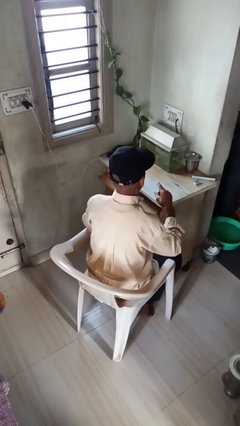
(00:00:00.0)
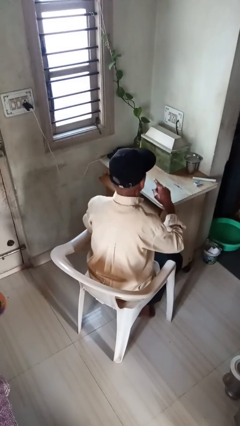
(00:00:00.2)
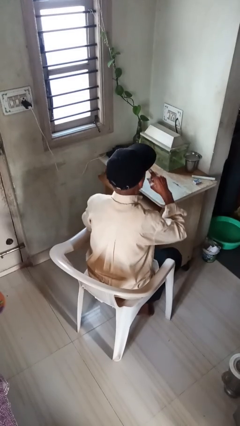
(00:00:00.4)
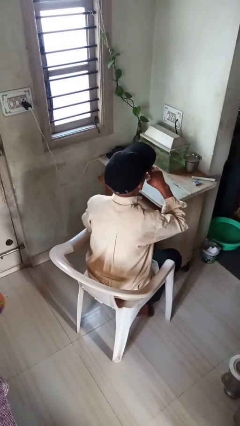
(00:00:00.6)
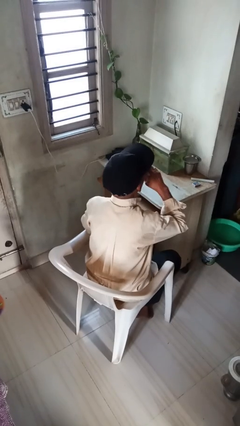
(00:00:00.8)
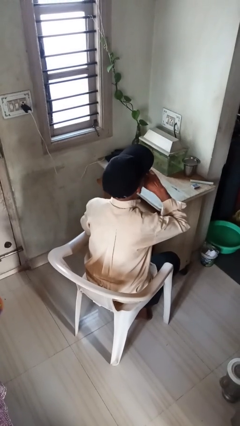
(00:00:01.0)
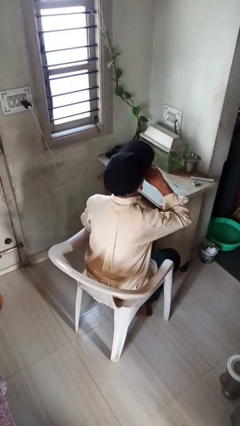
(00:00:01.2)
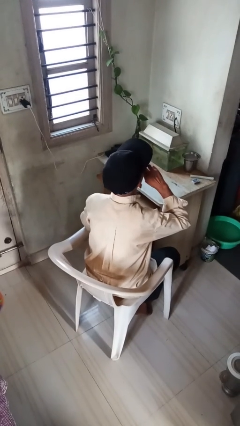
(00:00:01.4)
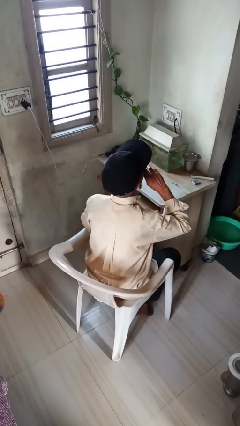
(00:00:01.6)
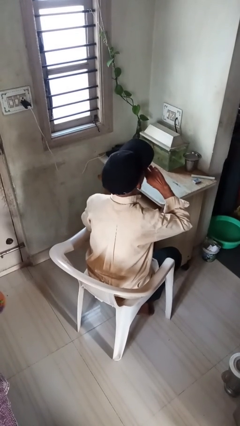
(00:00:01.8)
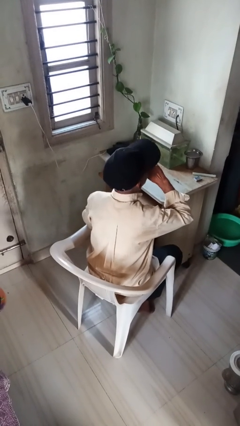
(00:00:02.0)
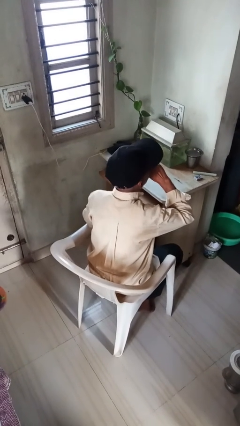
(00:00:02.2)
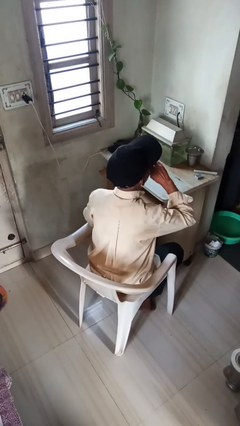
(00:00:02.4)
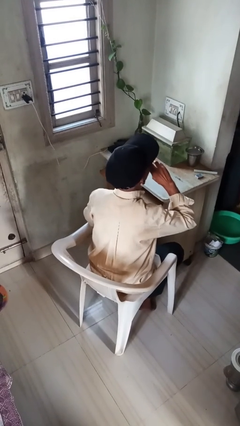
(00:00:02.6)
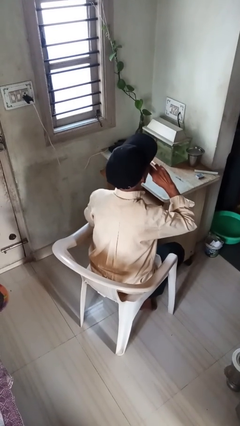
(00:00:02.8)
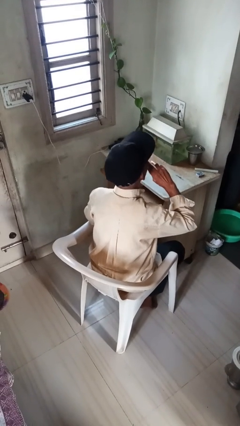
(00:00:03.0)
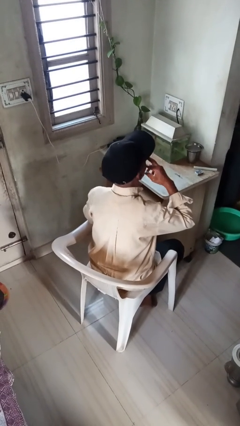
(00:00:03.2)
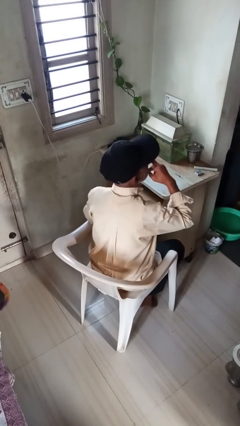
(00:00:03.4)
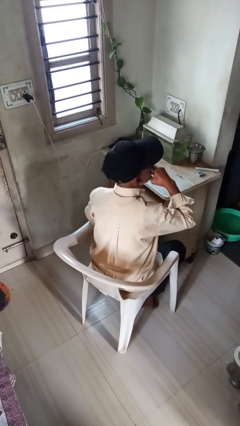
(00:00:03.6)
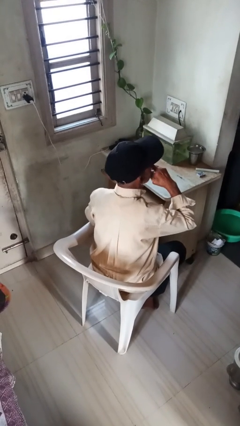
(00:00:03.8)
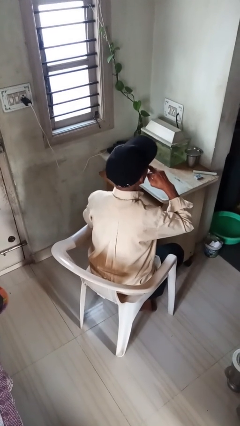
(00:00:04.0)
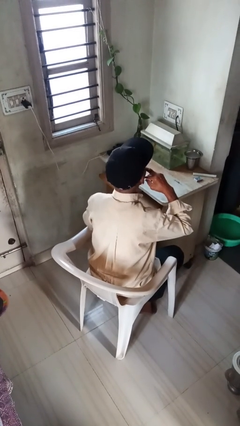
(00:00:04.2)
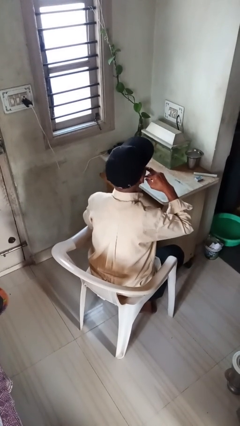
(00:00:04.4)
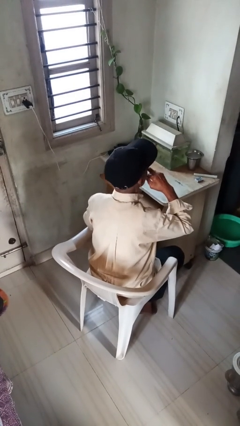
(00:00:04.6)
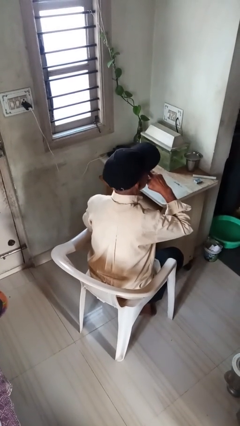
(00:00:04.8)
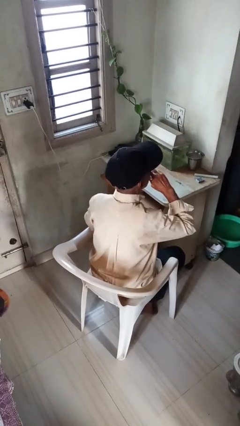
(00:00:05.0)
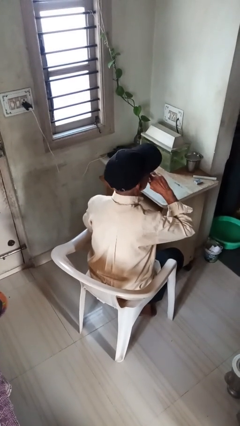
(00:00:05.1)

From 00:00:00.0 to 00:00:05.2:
person licks fingers

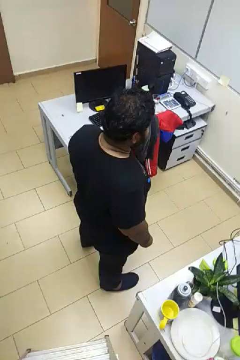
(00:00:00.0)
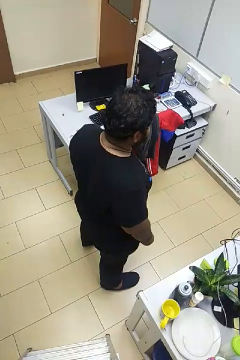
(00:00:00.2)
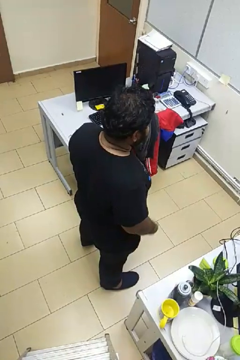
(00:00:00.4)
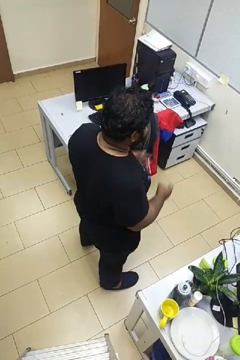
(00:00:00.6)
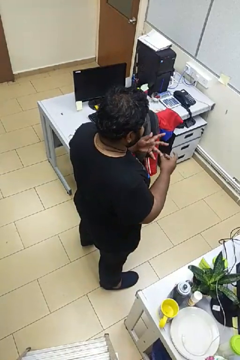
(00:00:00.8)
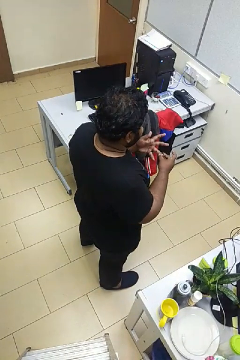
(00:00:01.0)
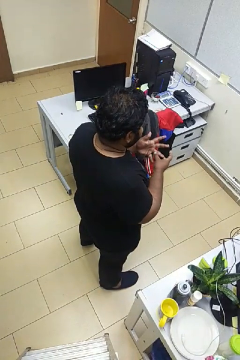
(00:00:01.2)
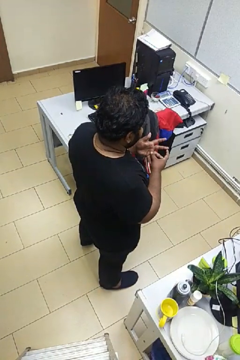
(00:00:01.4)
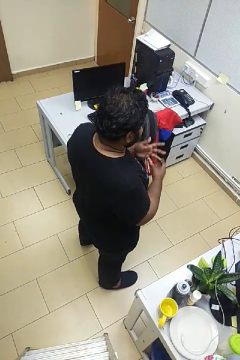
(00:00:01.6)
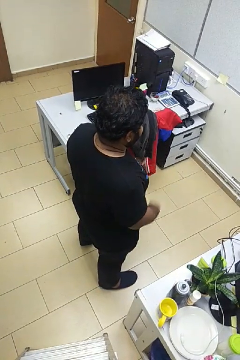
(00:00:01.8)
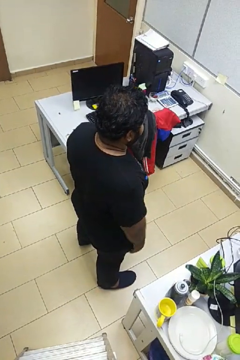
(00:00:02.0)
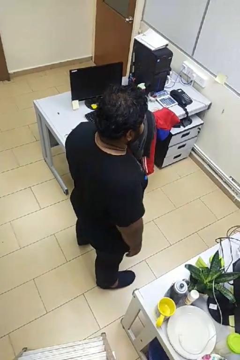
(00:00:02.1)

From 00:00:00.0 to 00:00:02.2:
person puts on ring

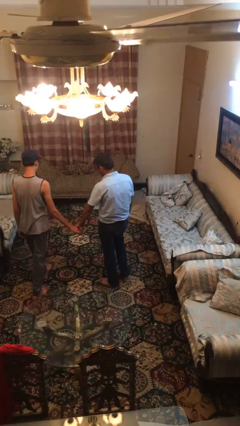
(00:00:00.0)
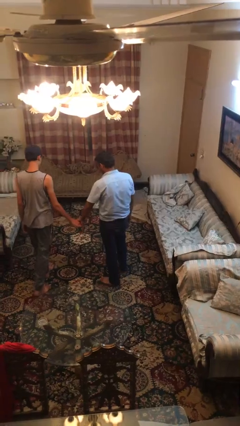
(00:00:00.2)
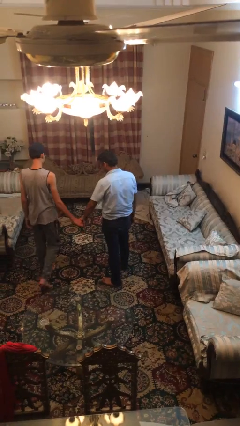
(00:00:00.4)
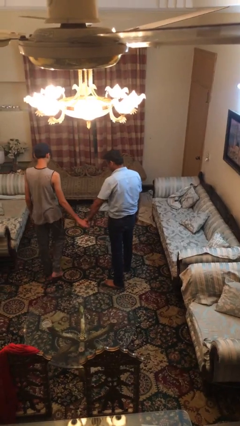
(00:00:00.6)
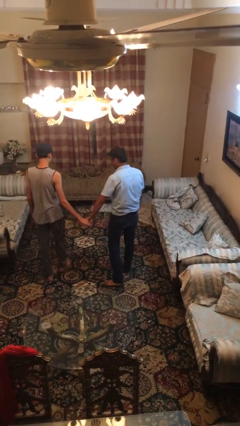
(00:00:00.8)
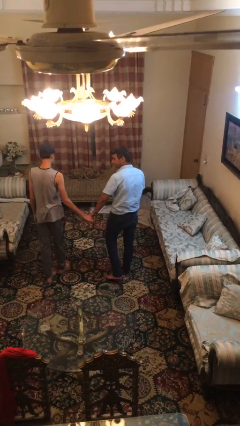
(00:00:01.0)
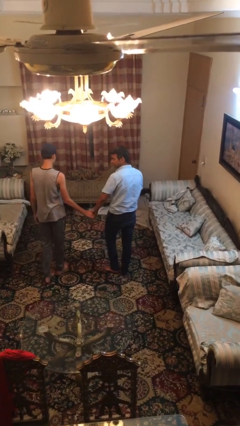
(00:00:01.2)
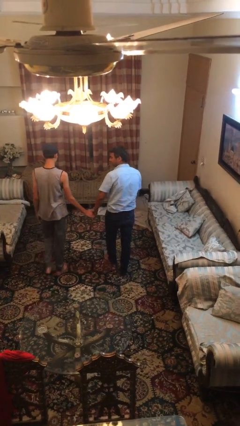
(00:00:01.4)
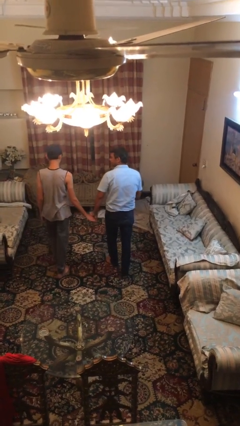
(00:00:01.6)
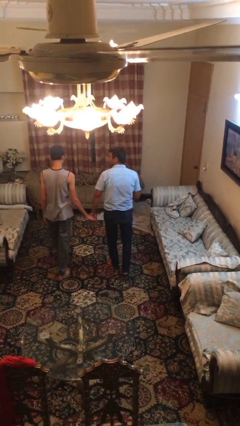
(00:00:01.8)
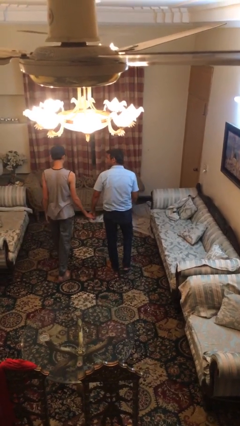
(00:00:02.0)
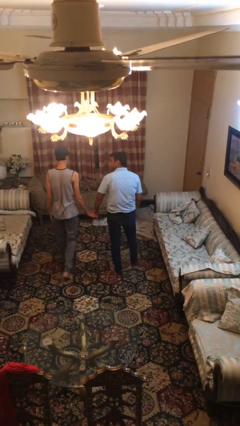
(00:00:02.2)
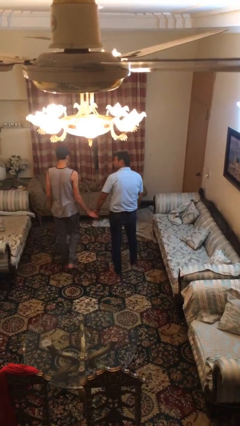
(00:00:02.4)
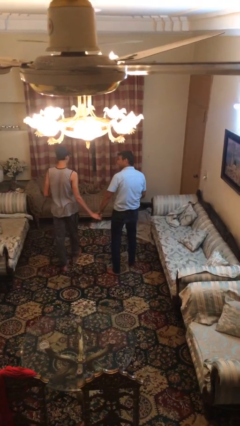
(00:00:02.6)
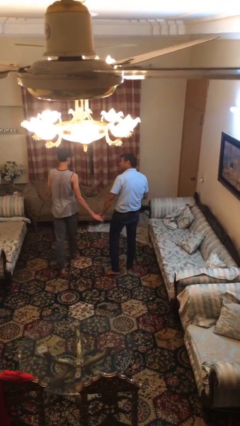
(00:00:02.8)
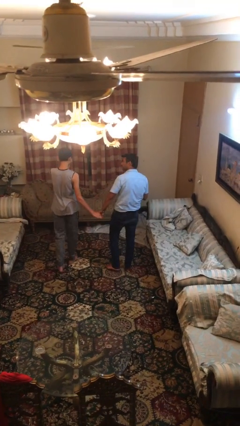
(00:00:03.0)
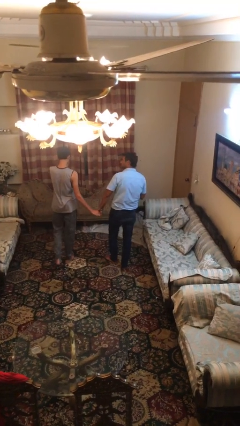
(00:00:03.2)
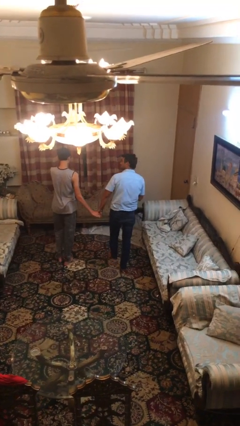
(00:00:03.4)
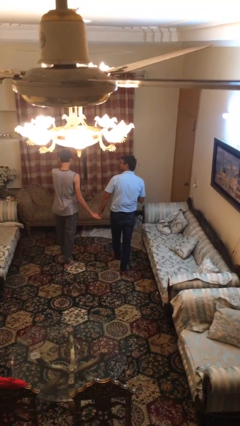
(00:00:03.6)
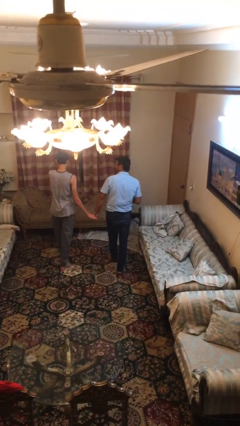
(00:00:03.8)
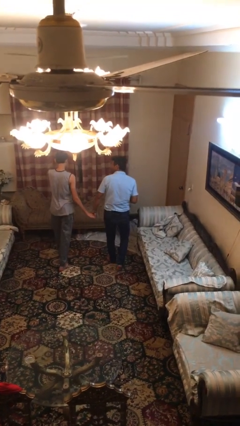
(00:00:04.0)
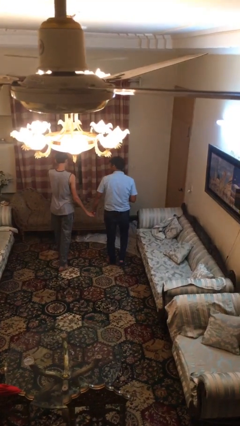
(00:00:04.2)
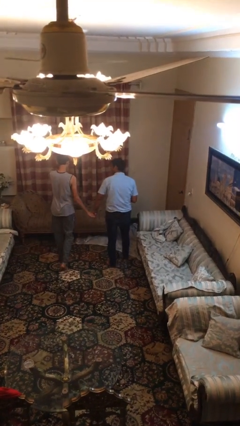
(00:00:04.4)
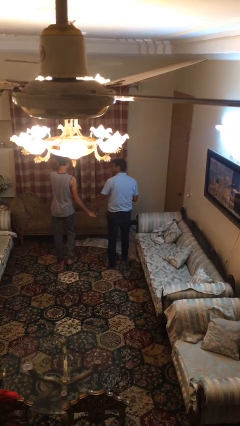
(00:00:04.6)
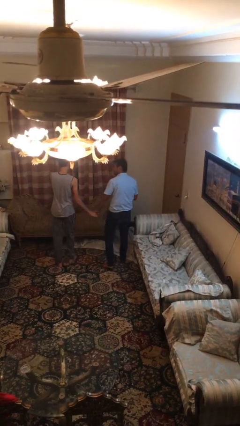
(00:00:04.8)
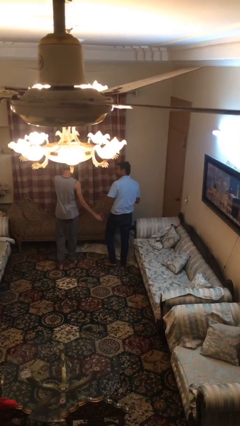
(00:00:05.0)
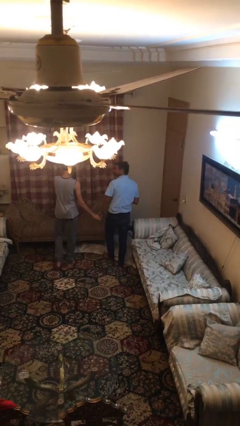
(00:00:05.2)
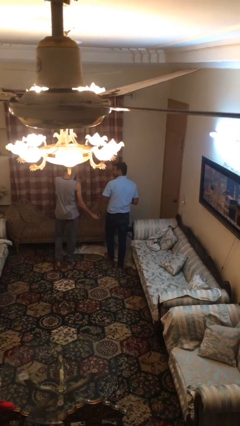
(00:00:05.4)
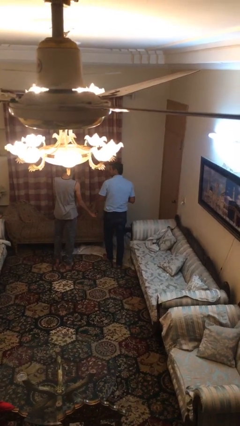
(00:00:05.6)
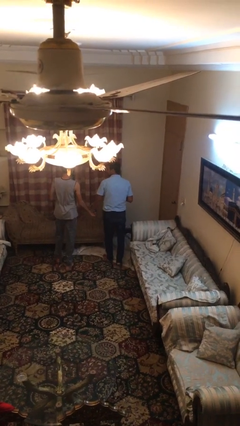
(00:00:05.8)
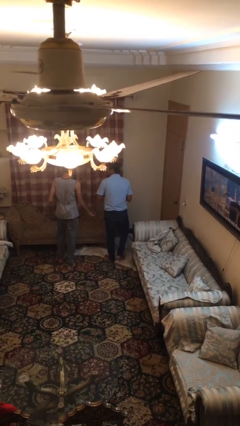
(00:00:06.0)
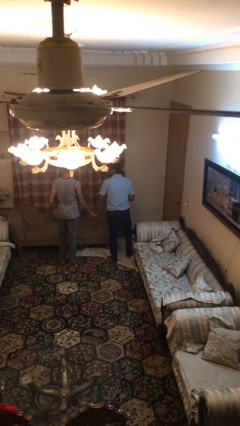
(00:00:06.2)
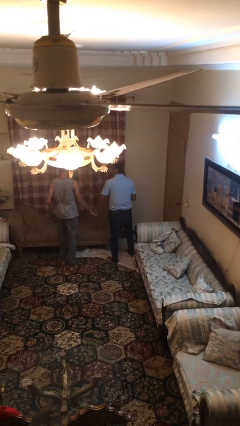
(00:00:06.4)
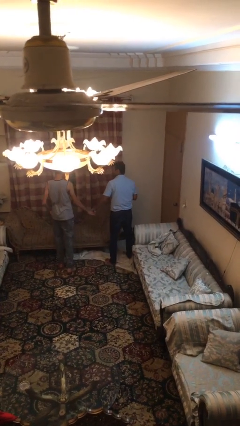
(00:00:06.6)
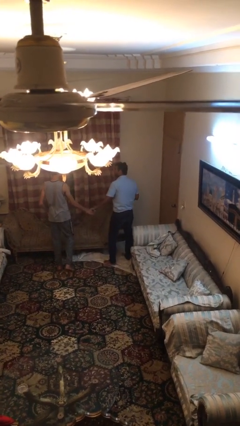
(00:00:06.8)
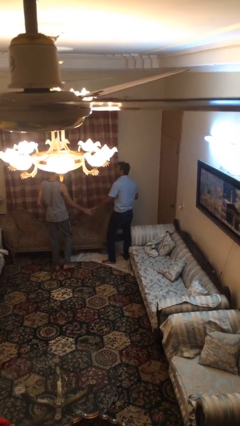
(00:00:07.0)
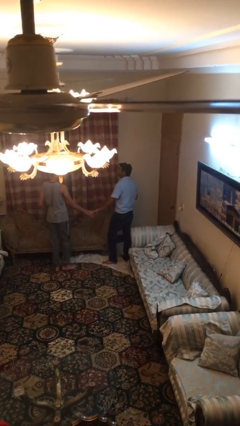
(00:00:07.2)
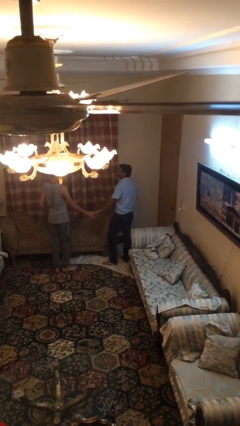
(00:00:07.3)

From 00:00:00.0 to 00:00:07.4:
person holds hand

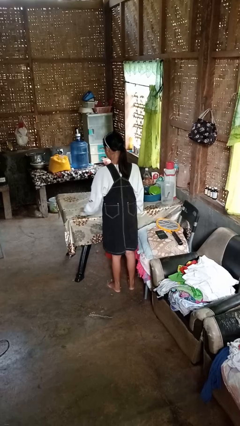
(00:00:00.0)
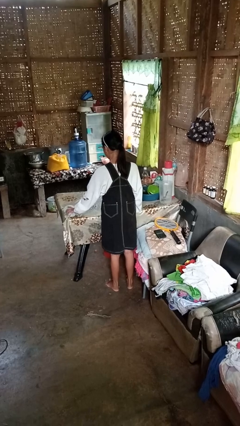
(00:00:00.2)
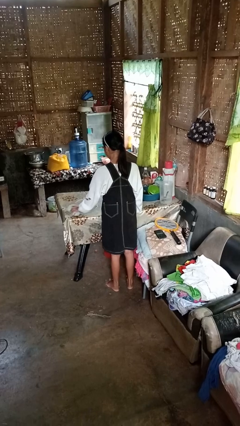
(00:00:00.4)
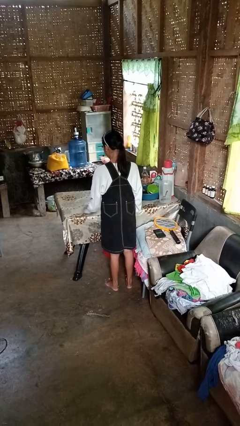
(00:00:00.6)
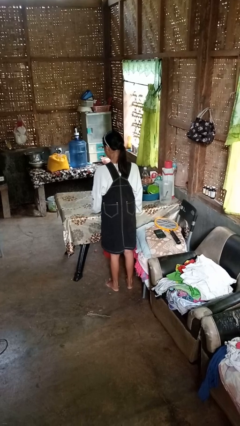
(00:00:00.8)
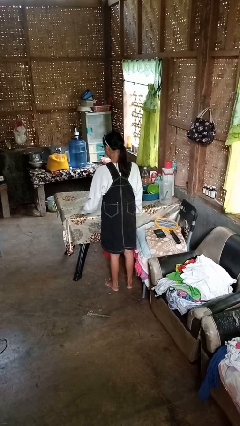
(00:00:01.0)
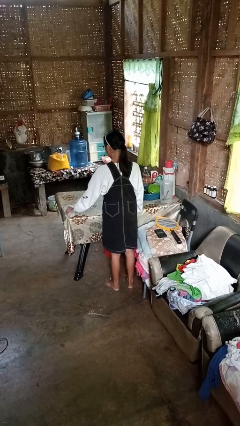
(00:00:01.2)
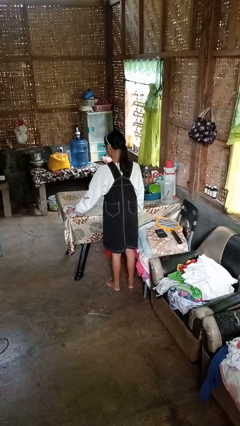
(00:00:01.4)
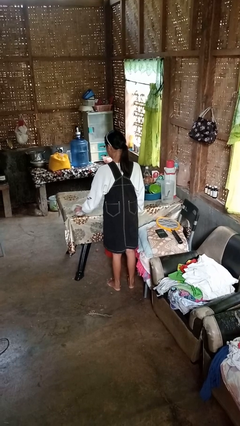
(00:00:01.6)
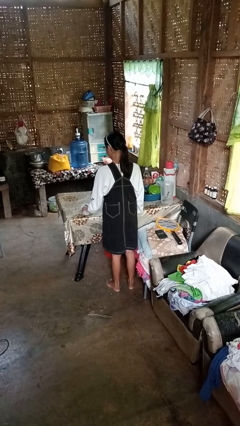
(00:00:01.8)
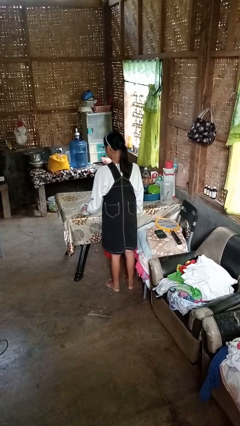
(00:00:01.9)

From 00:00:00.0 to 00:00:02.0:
person cleans table with rag

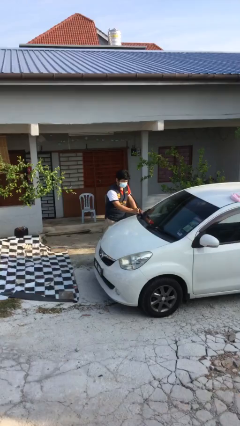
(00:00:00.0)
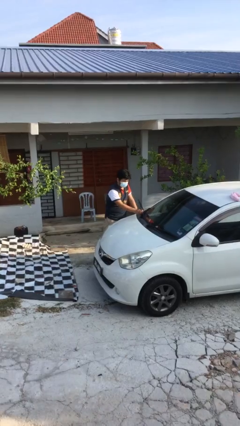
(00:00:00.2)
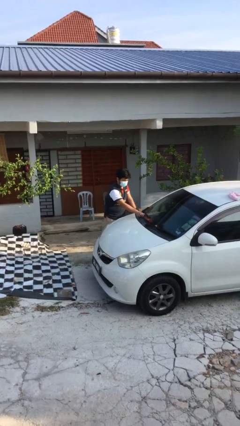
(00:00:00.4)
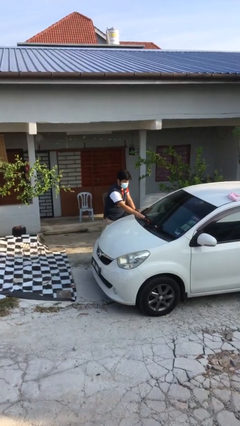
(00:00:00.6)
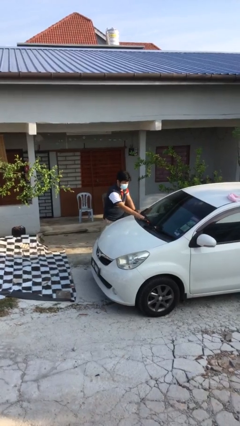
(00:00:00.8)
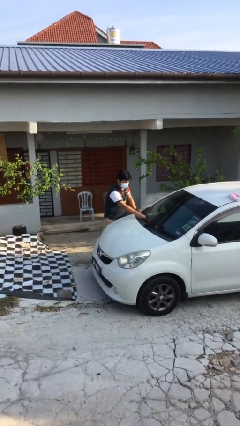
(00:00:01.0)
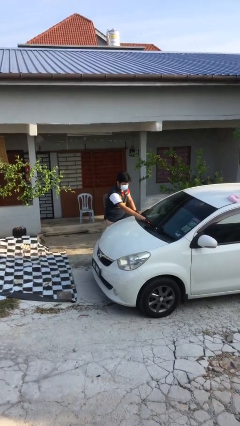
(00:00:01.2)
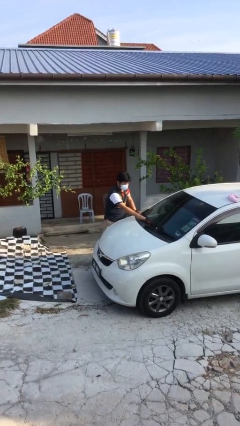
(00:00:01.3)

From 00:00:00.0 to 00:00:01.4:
person flips down car wipers
